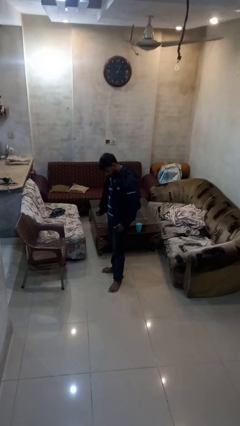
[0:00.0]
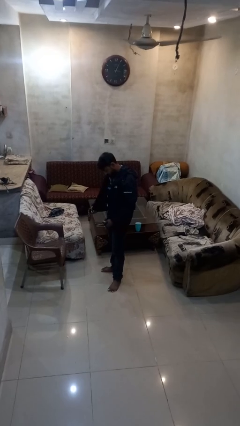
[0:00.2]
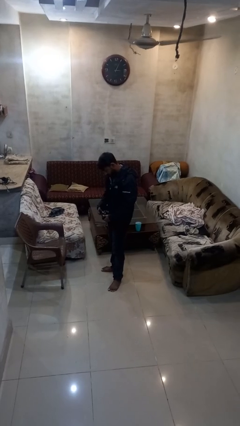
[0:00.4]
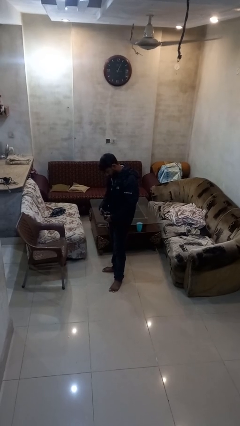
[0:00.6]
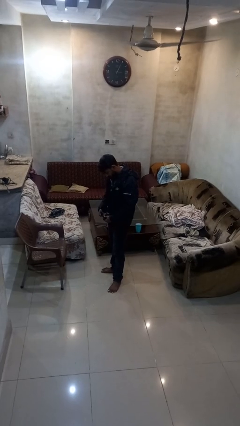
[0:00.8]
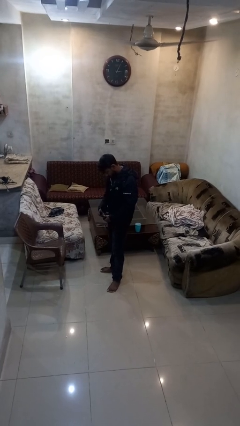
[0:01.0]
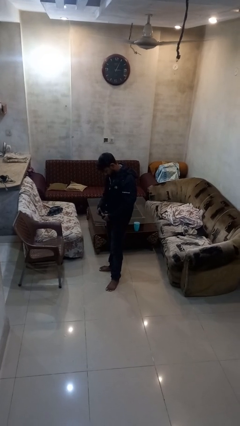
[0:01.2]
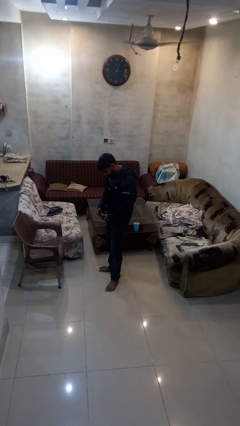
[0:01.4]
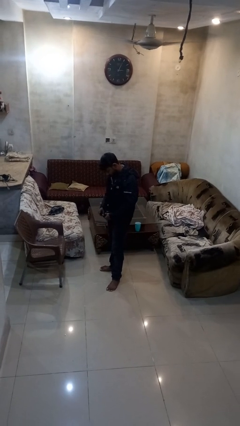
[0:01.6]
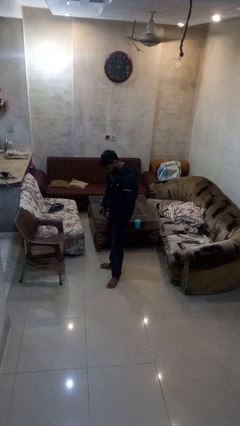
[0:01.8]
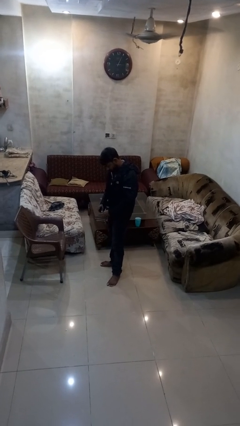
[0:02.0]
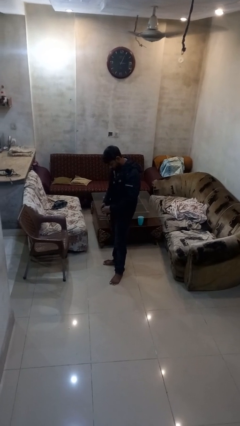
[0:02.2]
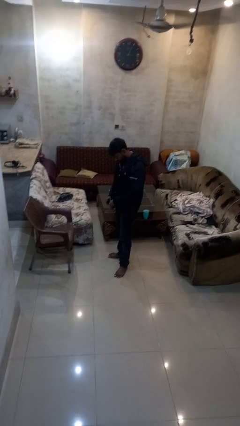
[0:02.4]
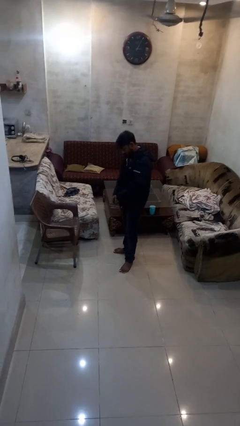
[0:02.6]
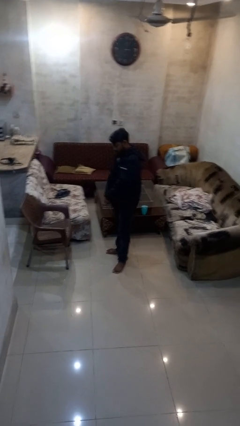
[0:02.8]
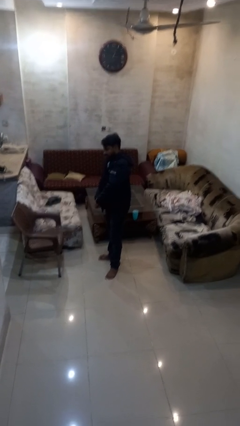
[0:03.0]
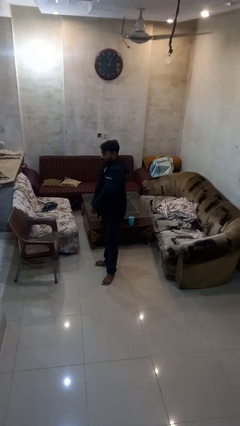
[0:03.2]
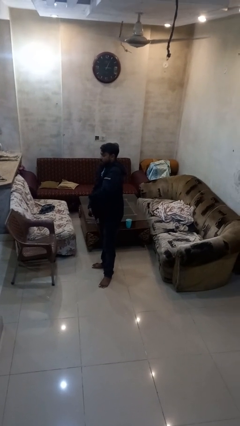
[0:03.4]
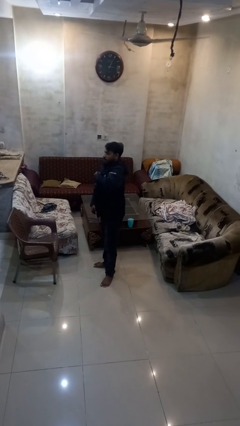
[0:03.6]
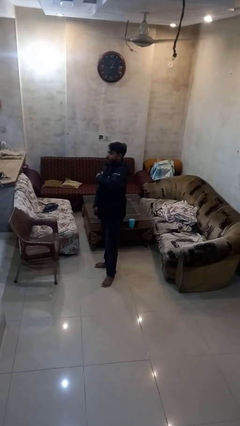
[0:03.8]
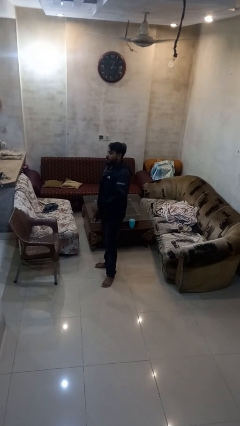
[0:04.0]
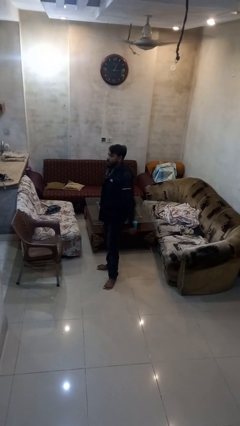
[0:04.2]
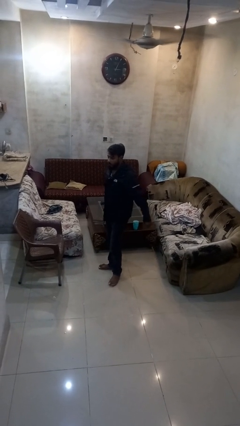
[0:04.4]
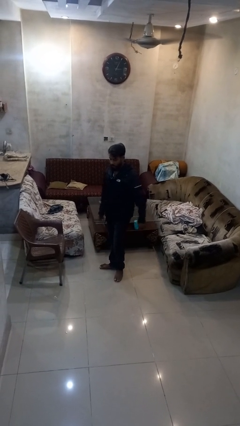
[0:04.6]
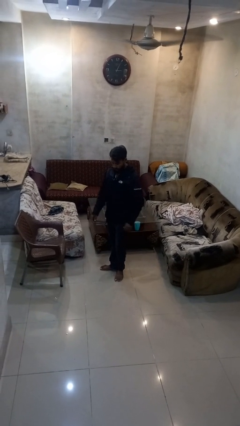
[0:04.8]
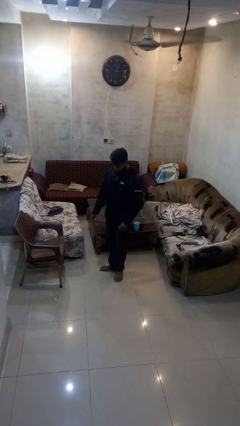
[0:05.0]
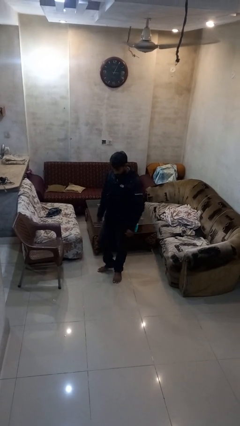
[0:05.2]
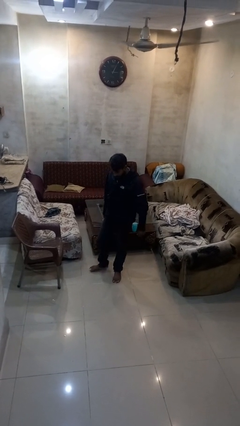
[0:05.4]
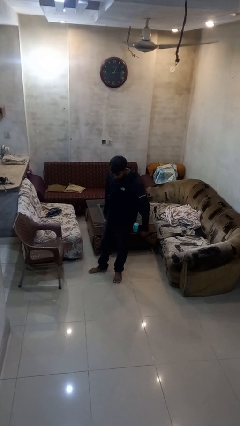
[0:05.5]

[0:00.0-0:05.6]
person zips up jacket

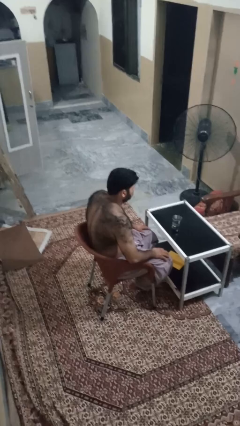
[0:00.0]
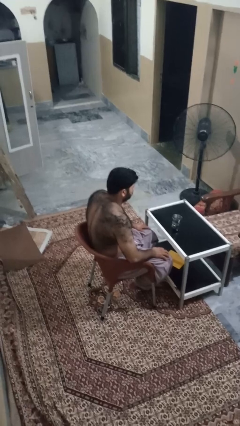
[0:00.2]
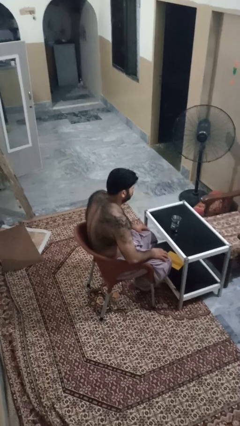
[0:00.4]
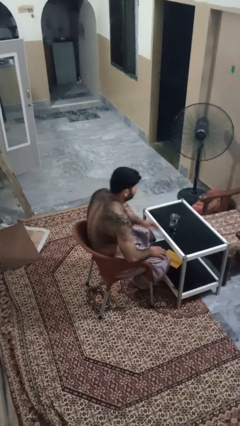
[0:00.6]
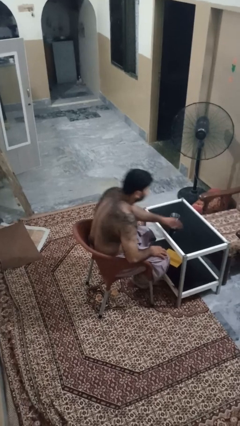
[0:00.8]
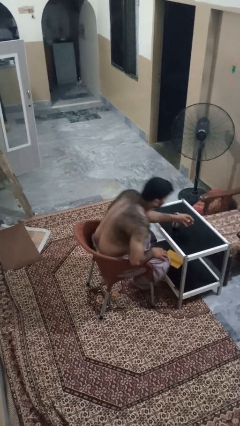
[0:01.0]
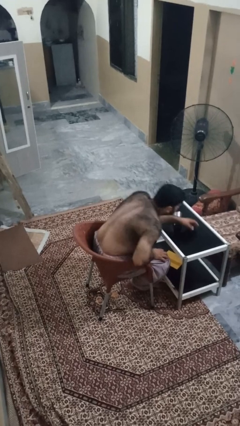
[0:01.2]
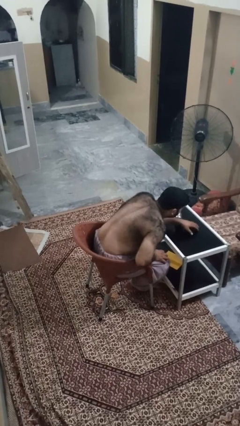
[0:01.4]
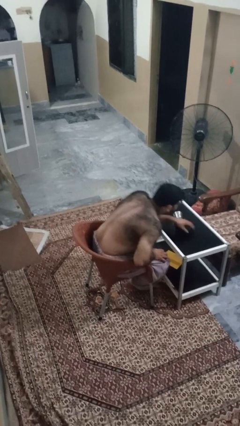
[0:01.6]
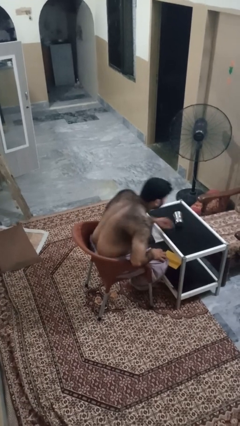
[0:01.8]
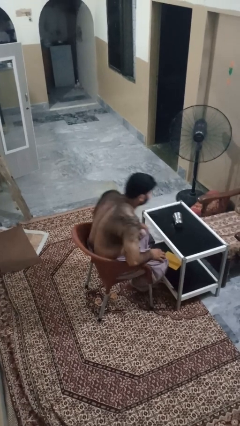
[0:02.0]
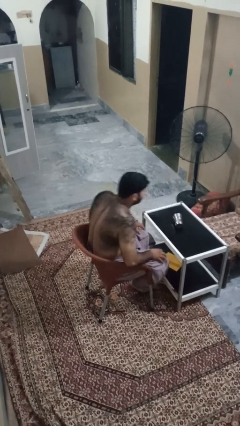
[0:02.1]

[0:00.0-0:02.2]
person knocks over glass

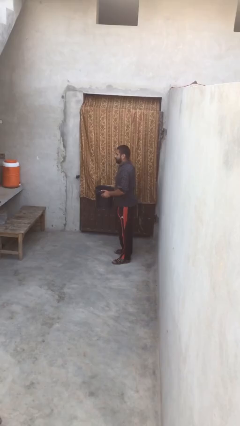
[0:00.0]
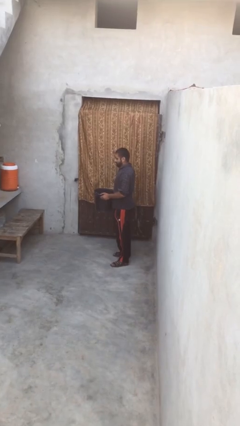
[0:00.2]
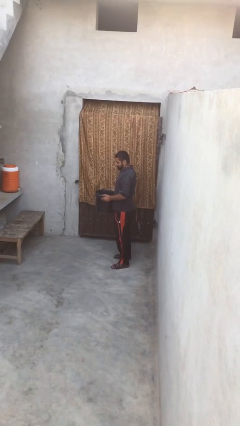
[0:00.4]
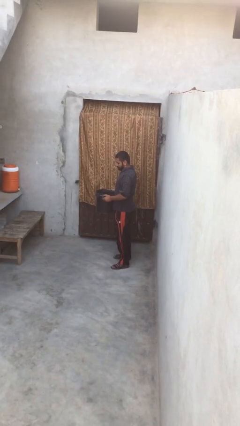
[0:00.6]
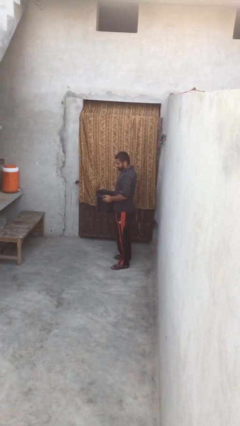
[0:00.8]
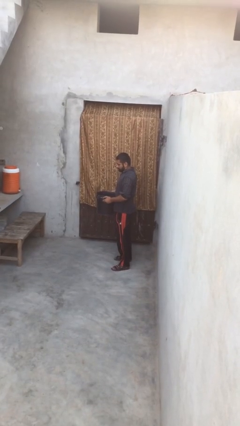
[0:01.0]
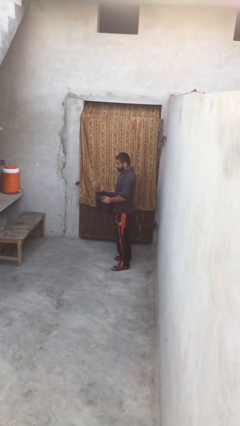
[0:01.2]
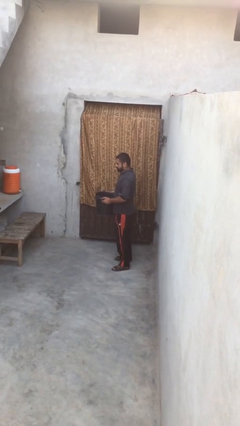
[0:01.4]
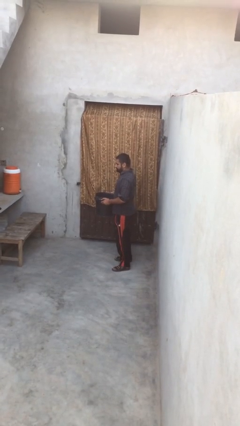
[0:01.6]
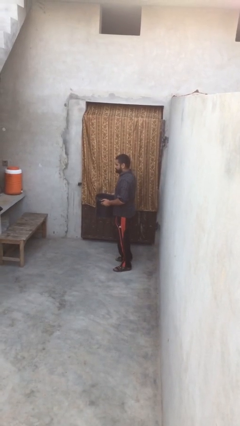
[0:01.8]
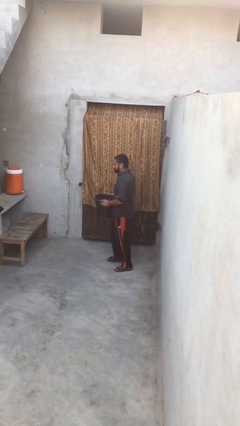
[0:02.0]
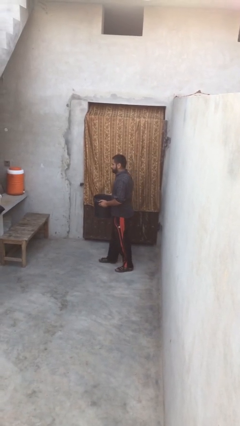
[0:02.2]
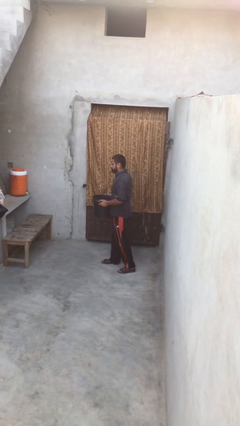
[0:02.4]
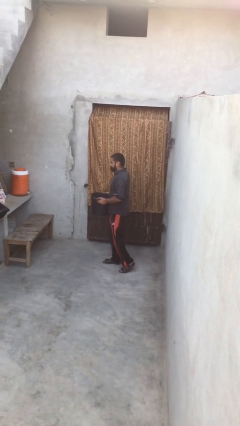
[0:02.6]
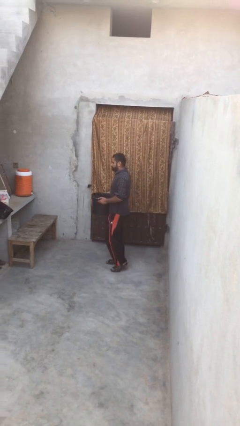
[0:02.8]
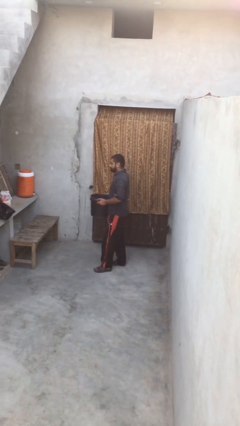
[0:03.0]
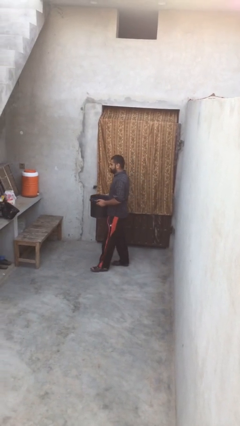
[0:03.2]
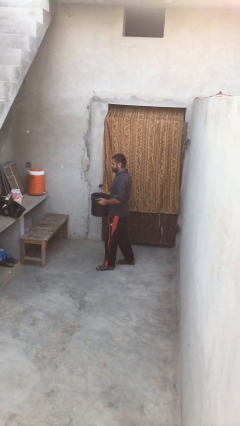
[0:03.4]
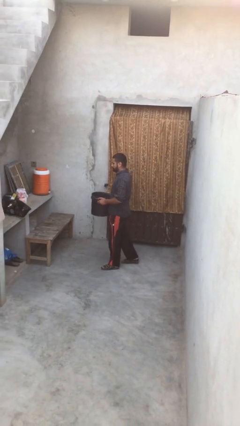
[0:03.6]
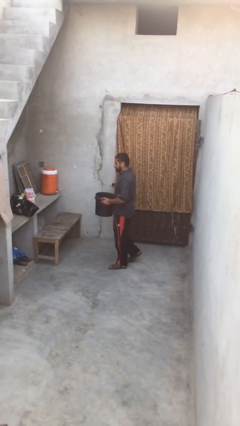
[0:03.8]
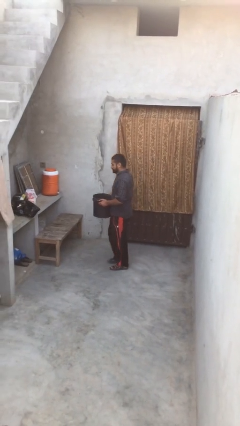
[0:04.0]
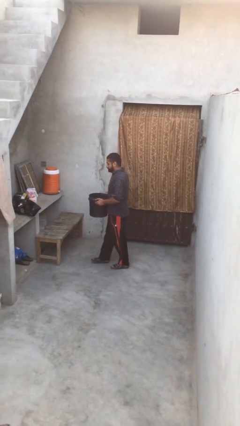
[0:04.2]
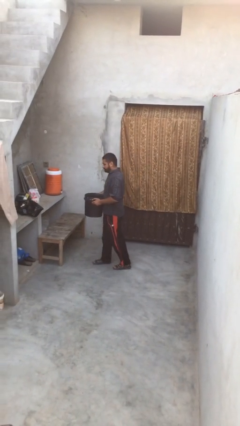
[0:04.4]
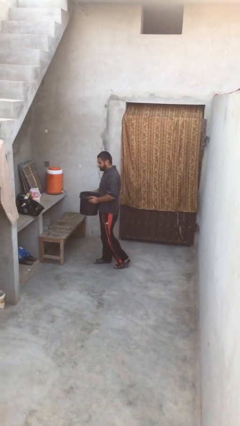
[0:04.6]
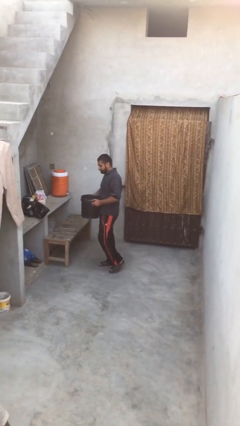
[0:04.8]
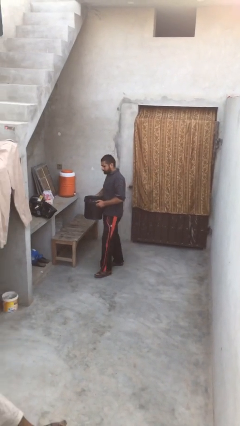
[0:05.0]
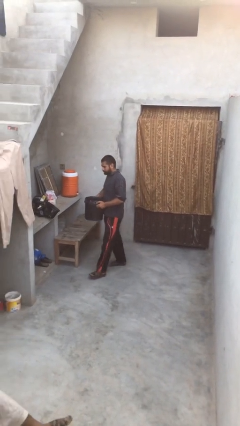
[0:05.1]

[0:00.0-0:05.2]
person carries heavy object

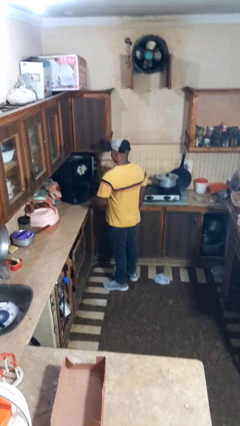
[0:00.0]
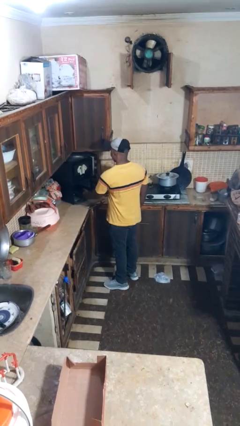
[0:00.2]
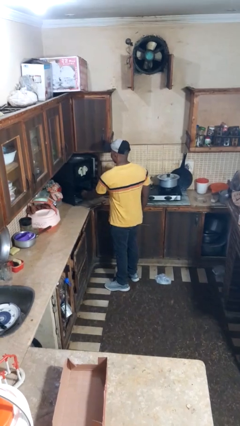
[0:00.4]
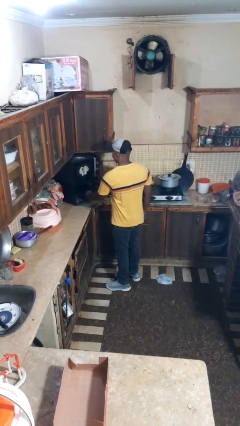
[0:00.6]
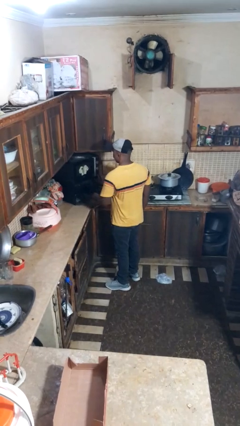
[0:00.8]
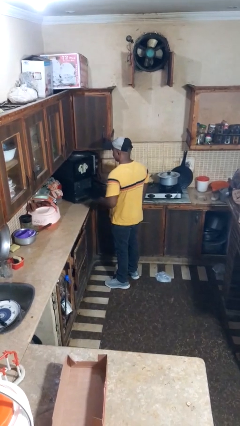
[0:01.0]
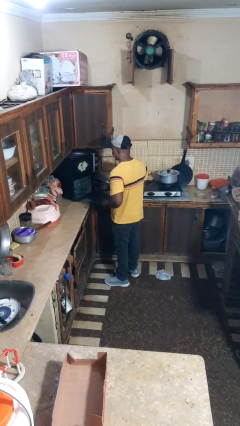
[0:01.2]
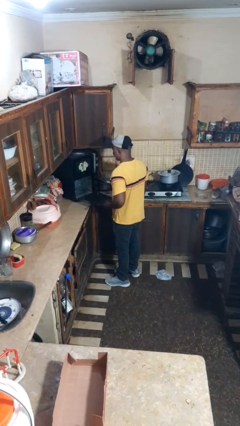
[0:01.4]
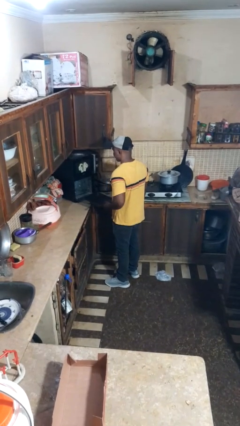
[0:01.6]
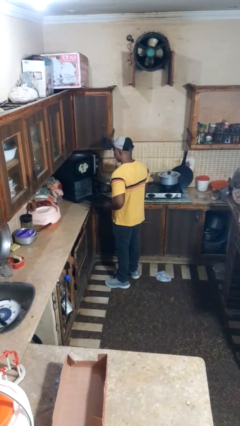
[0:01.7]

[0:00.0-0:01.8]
person takes object from oven

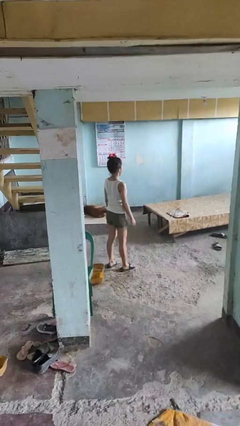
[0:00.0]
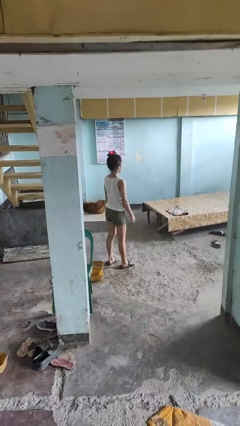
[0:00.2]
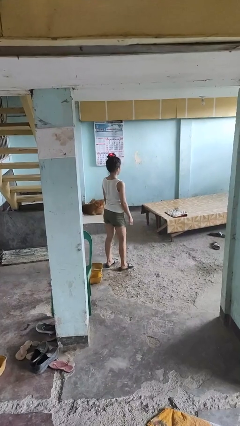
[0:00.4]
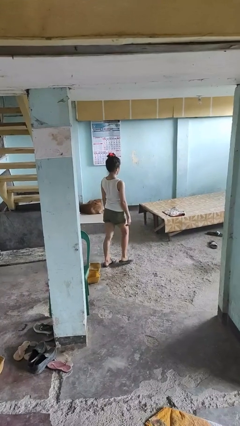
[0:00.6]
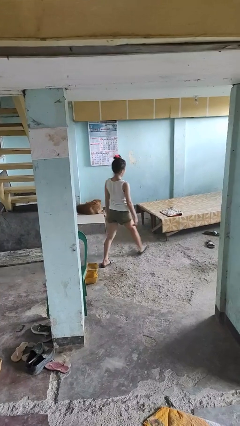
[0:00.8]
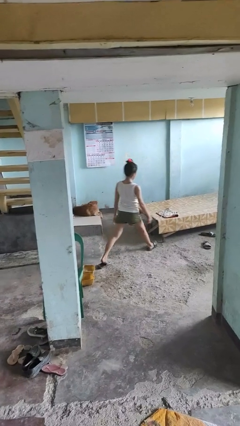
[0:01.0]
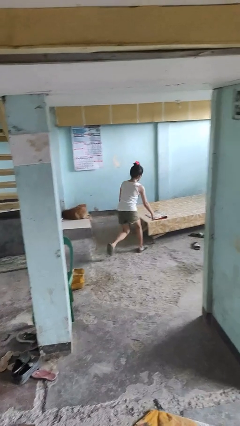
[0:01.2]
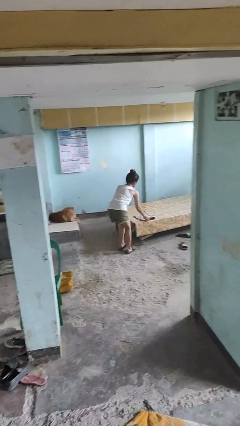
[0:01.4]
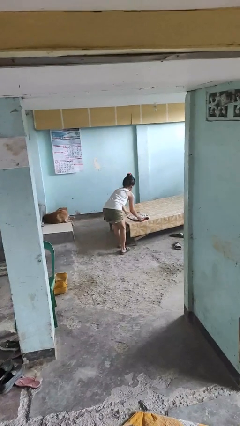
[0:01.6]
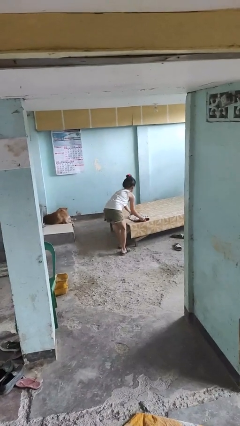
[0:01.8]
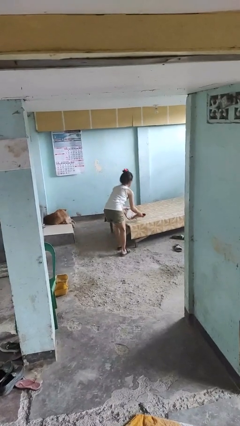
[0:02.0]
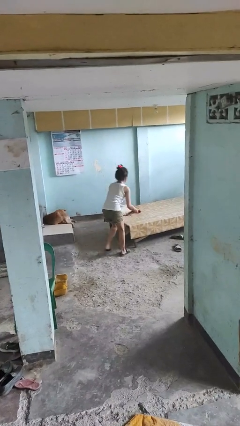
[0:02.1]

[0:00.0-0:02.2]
person picks up object from table

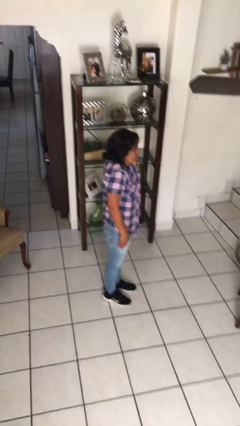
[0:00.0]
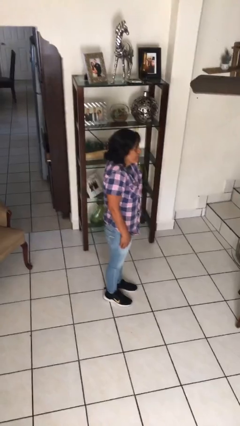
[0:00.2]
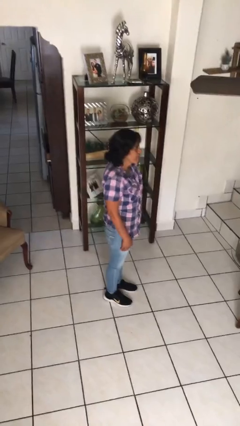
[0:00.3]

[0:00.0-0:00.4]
person shrugs
